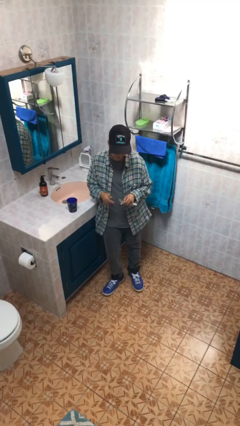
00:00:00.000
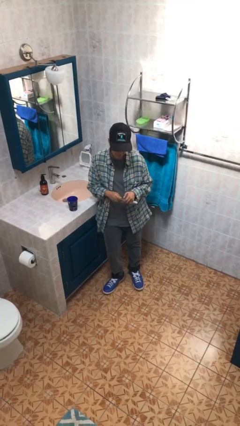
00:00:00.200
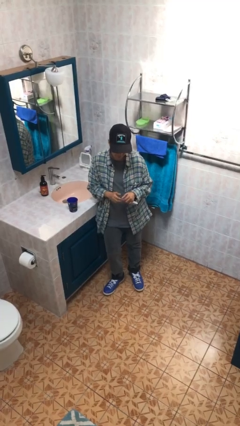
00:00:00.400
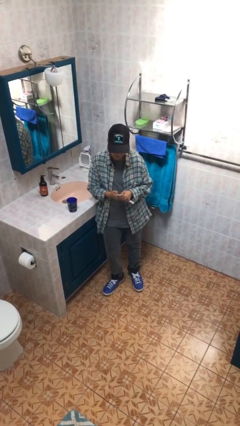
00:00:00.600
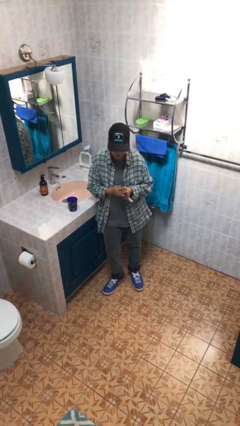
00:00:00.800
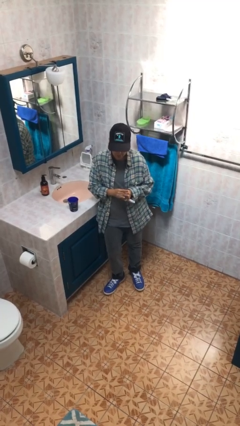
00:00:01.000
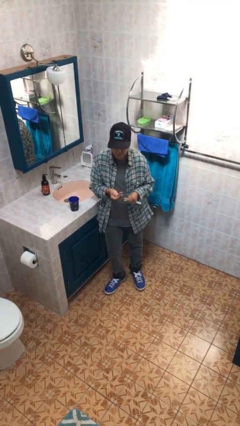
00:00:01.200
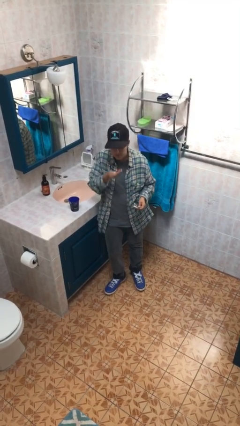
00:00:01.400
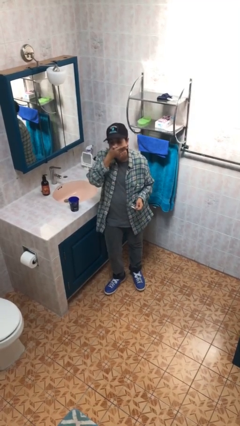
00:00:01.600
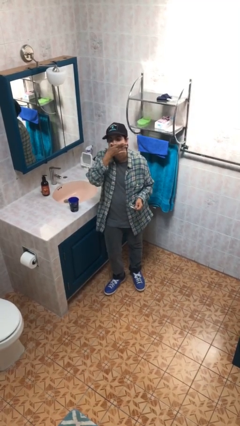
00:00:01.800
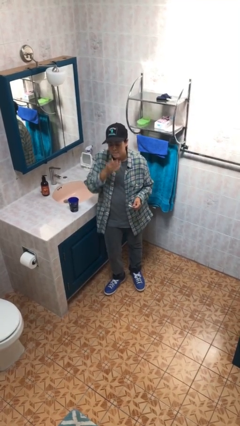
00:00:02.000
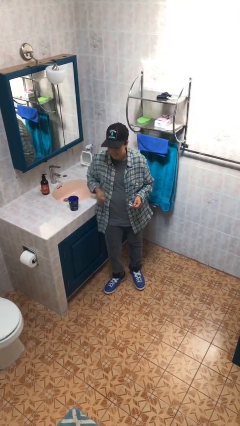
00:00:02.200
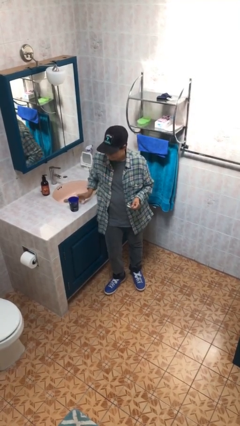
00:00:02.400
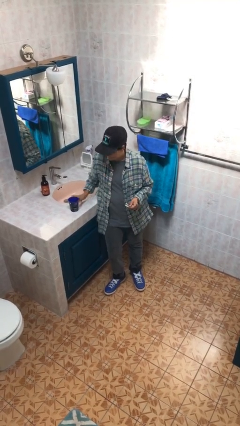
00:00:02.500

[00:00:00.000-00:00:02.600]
person takes medicine pills

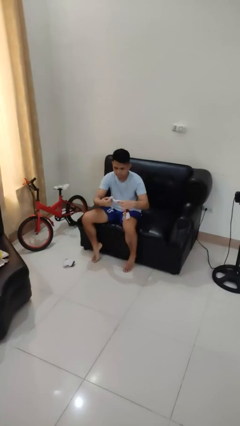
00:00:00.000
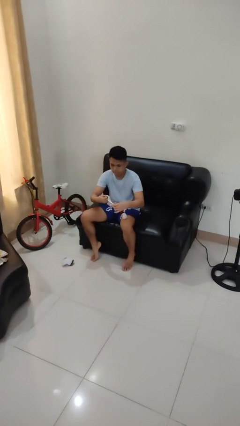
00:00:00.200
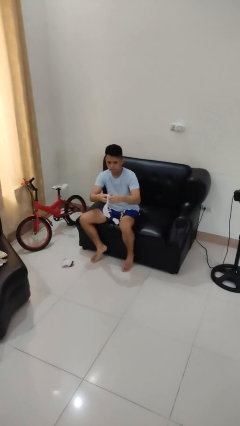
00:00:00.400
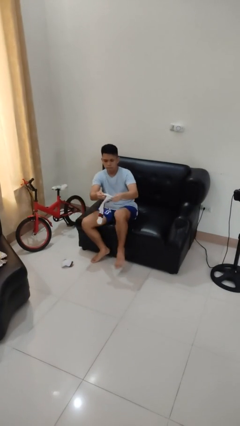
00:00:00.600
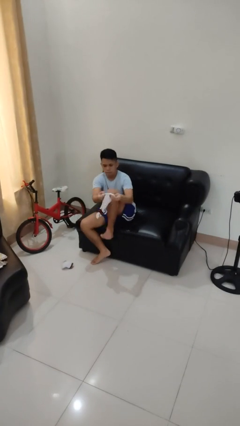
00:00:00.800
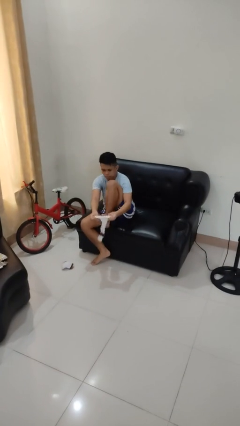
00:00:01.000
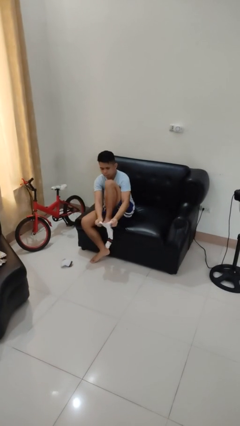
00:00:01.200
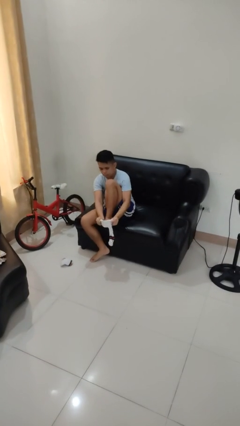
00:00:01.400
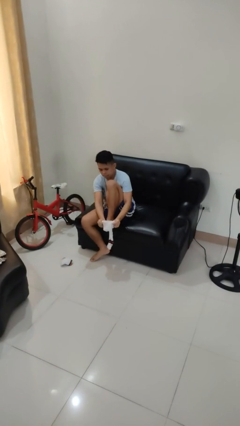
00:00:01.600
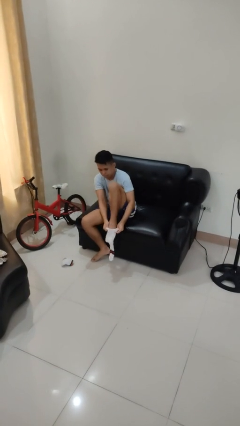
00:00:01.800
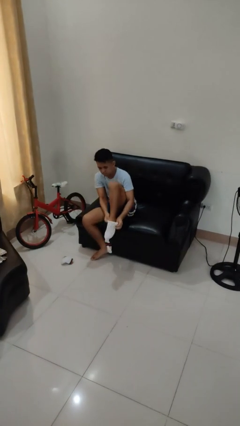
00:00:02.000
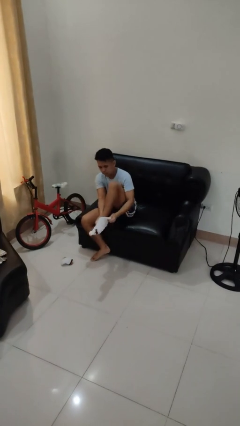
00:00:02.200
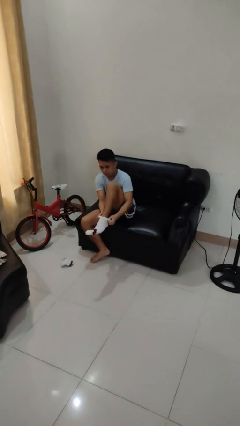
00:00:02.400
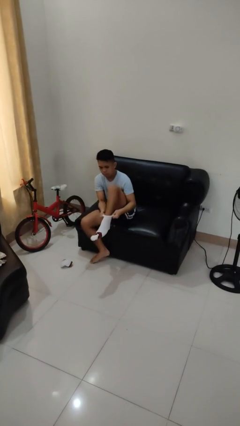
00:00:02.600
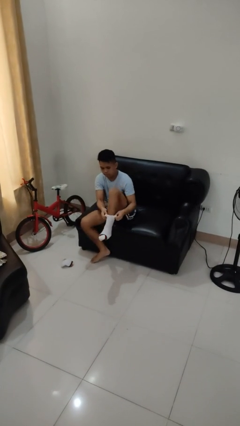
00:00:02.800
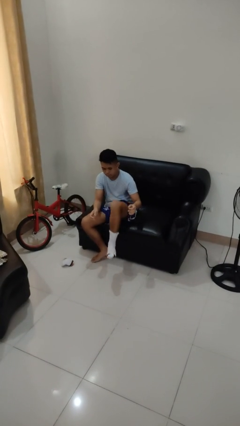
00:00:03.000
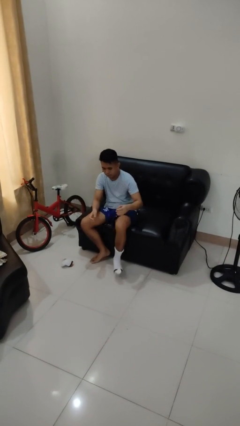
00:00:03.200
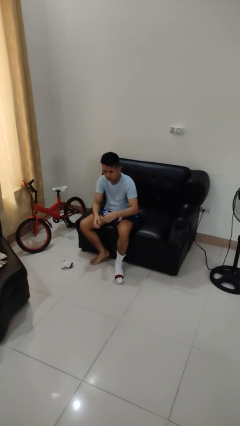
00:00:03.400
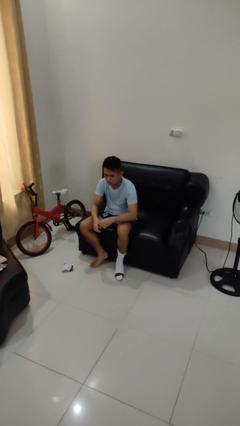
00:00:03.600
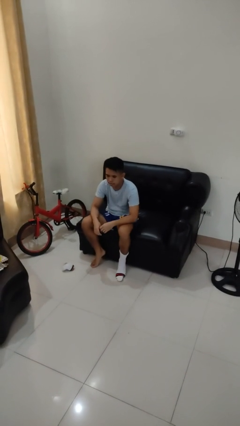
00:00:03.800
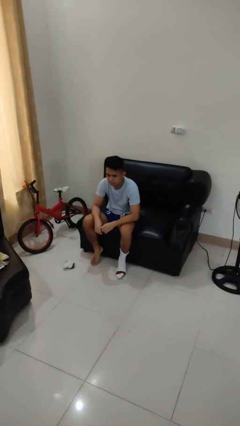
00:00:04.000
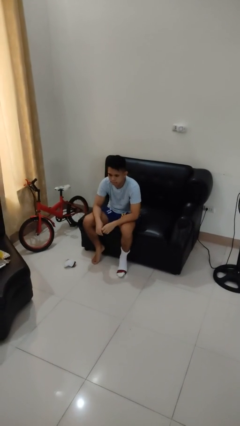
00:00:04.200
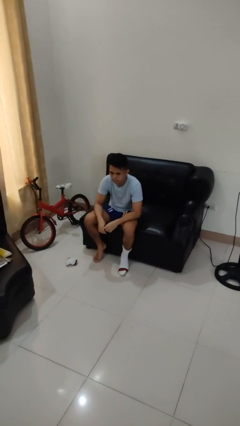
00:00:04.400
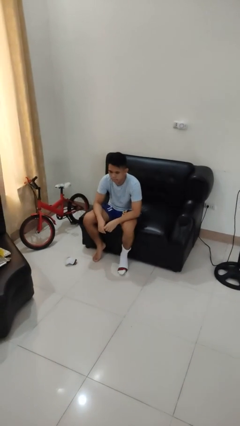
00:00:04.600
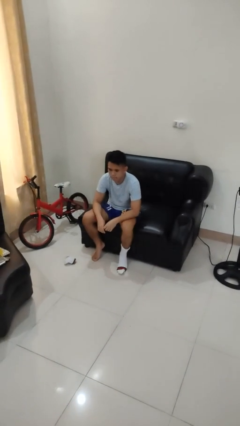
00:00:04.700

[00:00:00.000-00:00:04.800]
person puts on socks

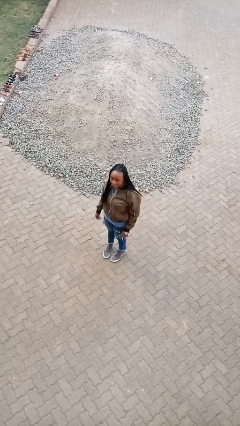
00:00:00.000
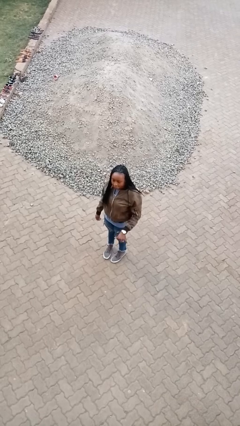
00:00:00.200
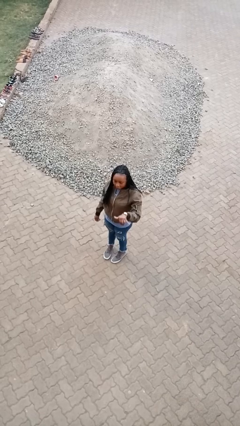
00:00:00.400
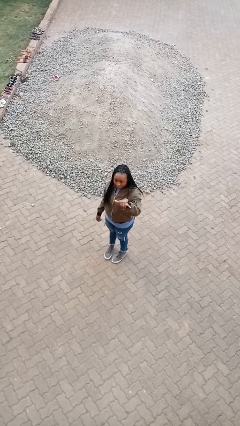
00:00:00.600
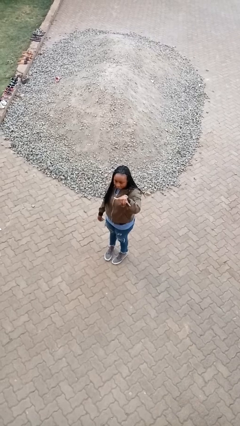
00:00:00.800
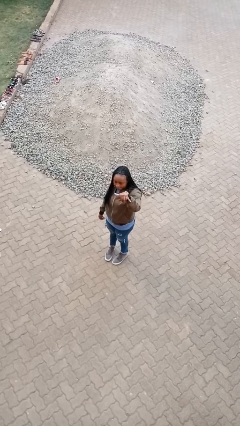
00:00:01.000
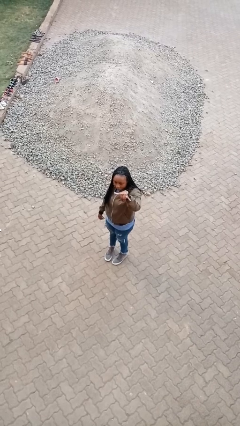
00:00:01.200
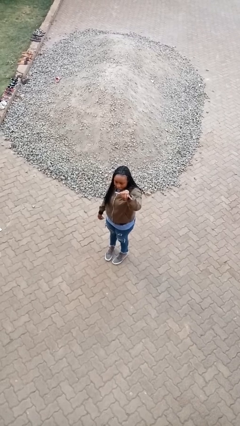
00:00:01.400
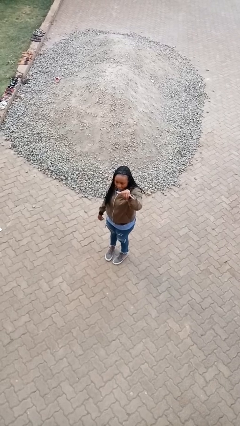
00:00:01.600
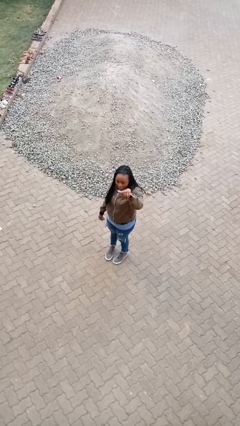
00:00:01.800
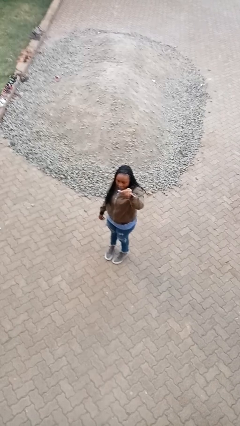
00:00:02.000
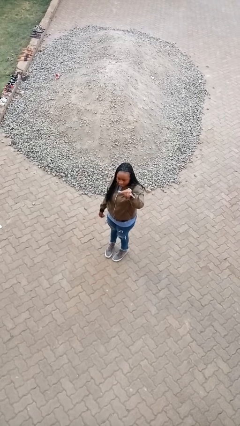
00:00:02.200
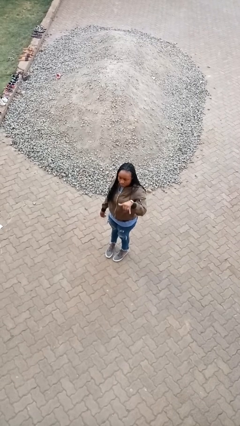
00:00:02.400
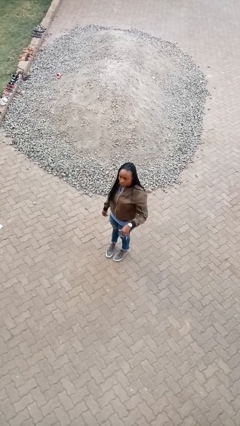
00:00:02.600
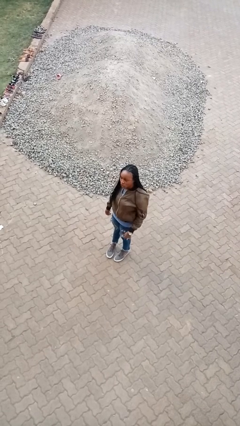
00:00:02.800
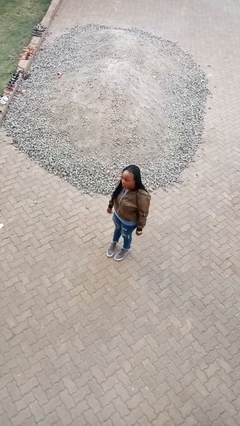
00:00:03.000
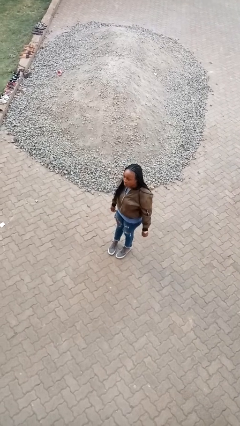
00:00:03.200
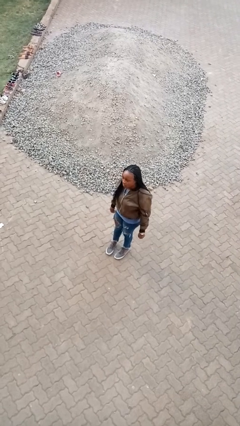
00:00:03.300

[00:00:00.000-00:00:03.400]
person gestures hang loose

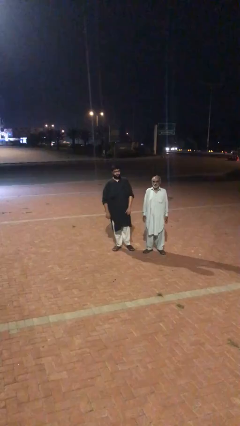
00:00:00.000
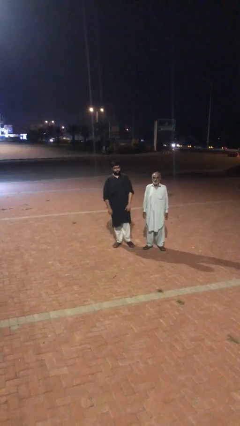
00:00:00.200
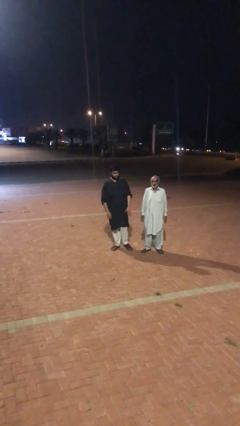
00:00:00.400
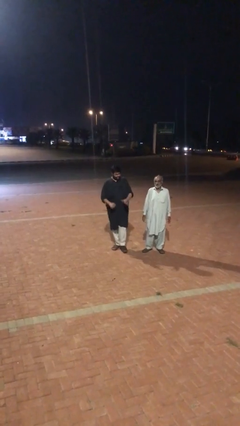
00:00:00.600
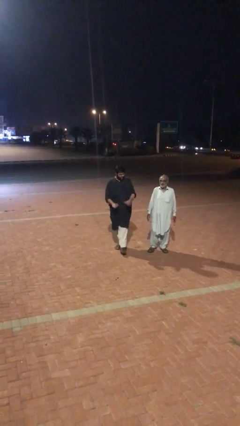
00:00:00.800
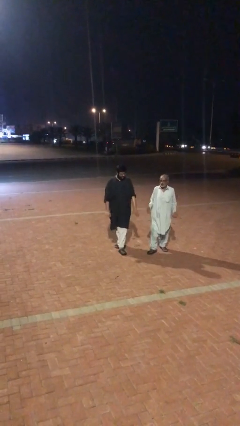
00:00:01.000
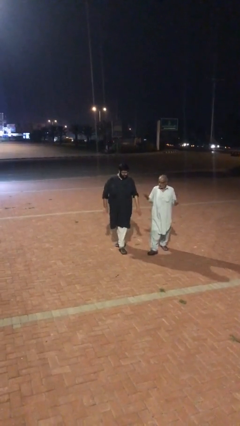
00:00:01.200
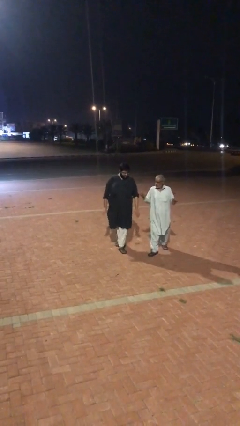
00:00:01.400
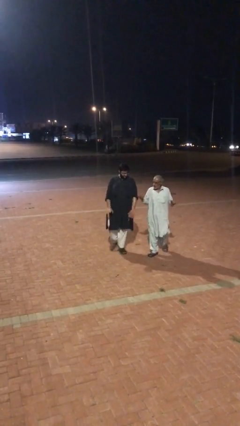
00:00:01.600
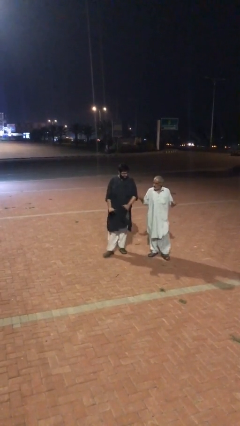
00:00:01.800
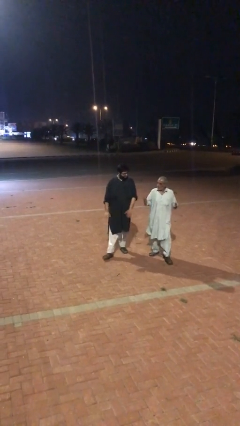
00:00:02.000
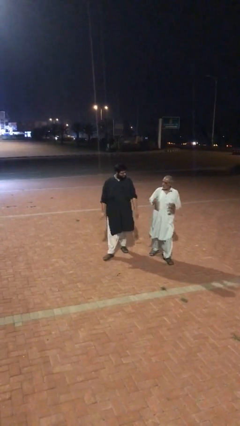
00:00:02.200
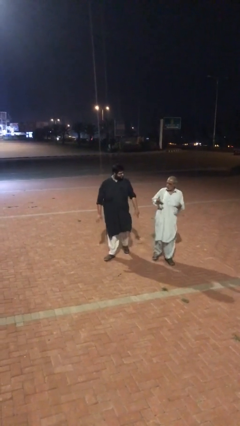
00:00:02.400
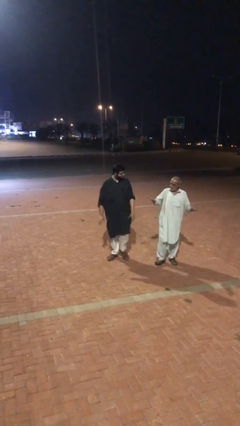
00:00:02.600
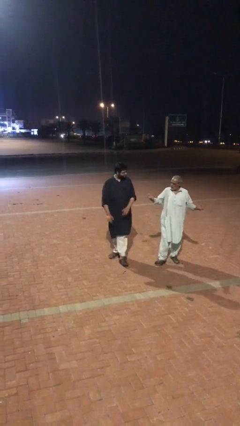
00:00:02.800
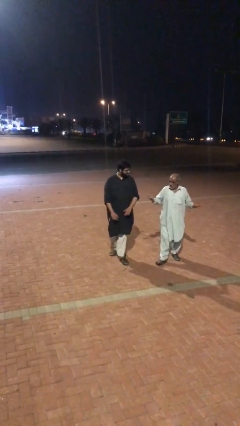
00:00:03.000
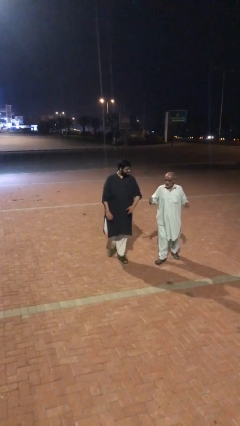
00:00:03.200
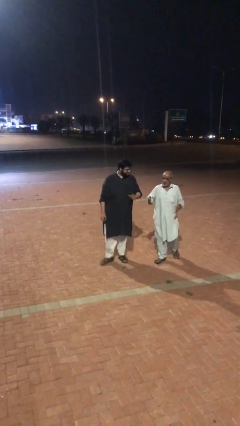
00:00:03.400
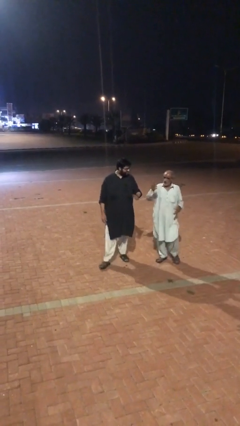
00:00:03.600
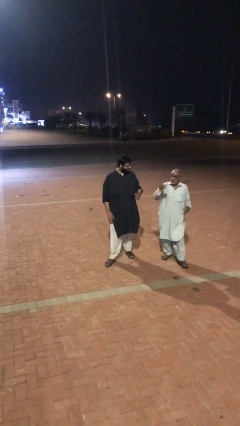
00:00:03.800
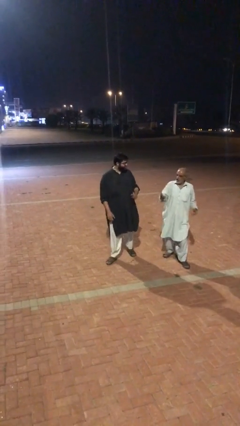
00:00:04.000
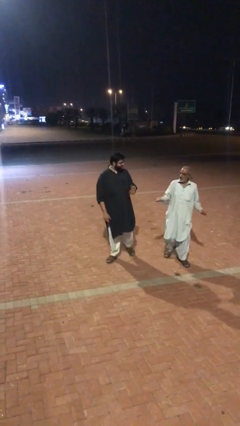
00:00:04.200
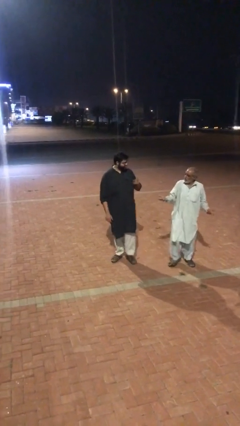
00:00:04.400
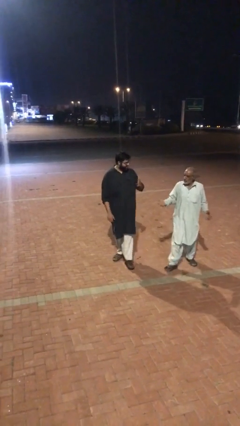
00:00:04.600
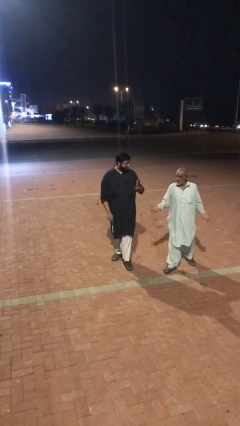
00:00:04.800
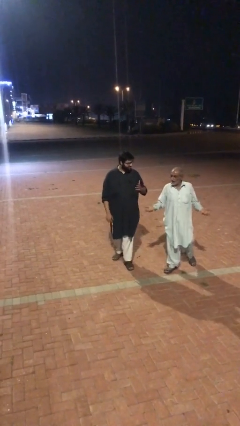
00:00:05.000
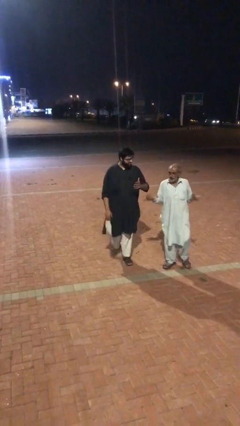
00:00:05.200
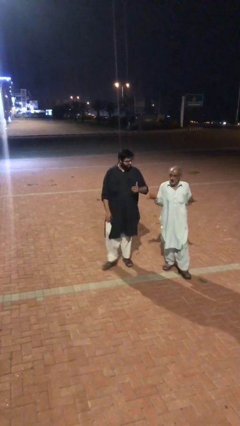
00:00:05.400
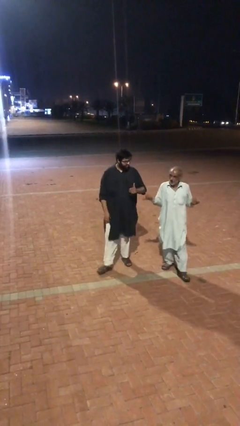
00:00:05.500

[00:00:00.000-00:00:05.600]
person talks to person

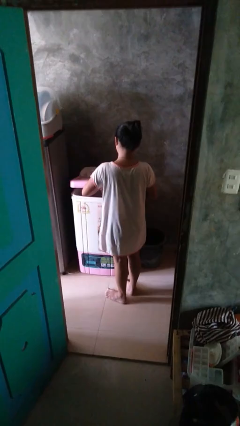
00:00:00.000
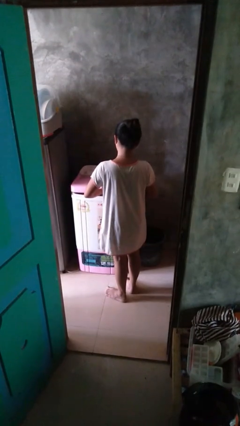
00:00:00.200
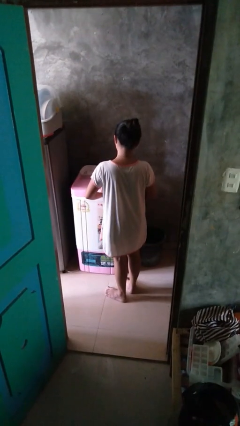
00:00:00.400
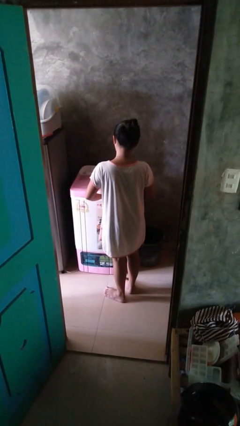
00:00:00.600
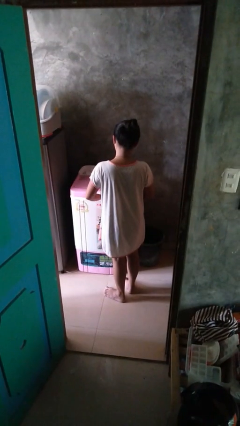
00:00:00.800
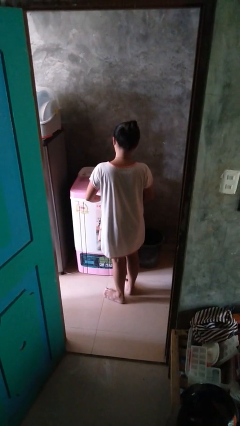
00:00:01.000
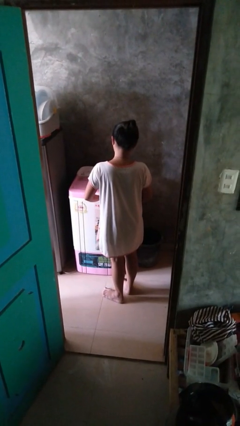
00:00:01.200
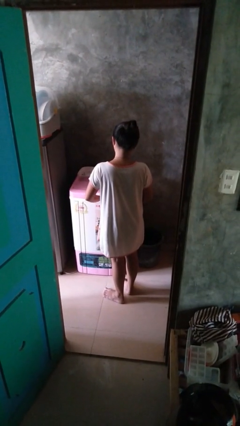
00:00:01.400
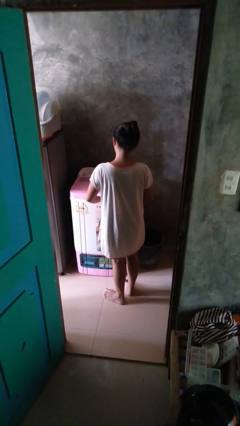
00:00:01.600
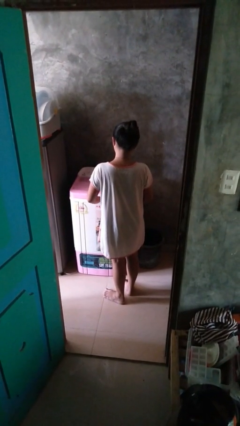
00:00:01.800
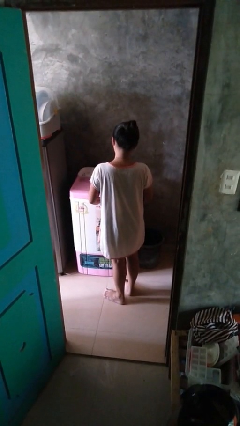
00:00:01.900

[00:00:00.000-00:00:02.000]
person closes clothes washer
